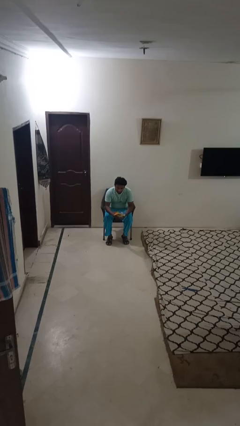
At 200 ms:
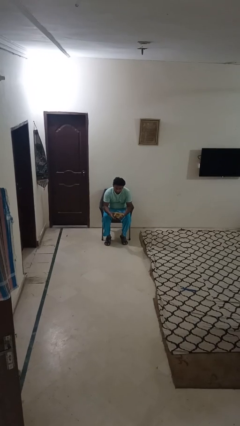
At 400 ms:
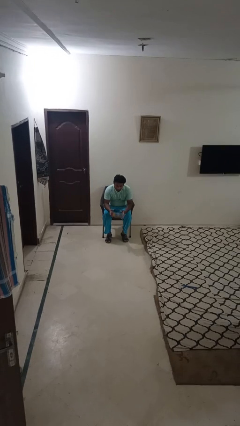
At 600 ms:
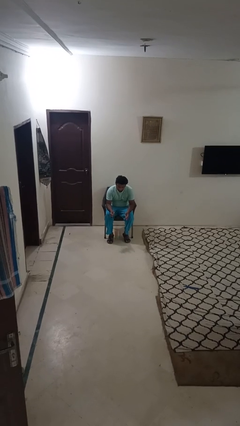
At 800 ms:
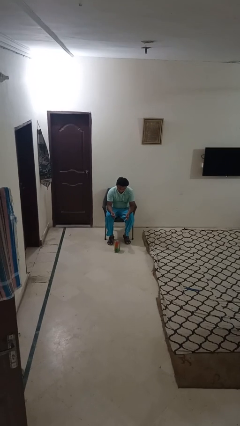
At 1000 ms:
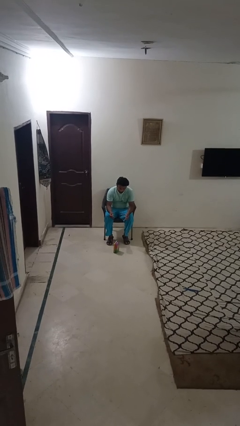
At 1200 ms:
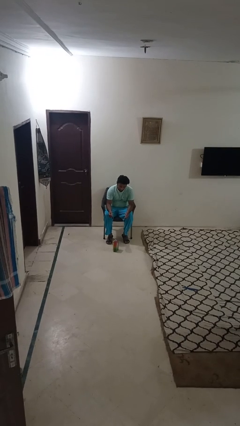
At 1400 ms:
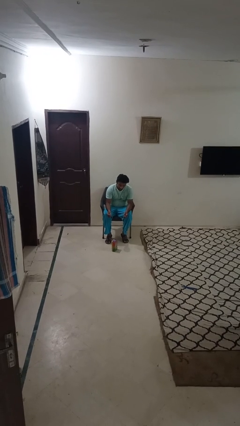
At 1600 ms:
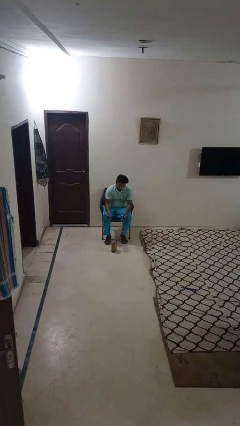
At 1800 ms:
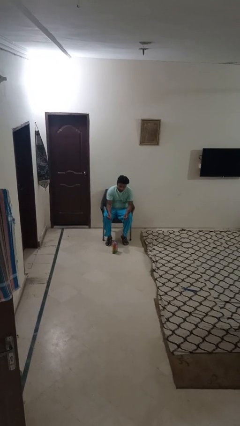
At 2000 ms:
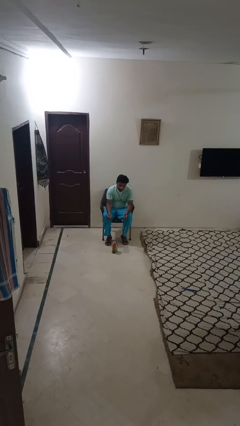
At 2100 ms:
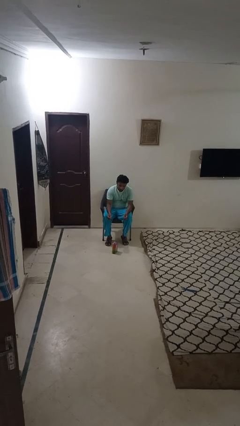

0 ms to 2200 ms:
person drops object

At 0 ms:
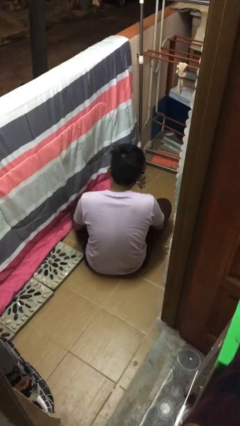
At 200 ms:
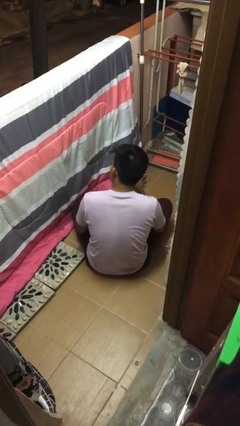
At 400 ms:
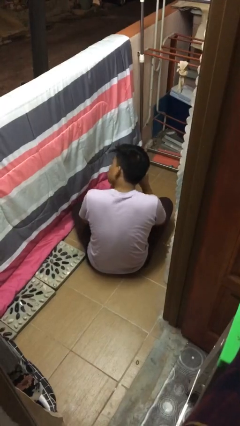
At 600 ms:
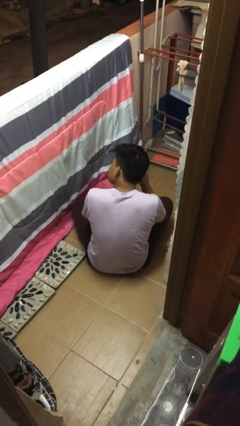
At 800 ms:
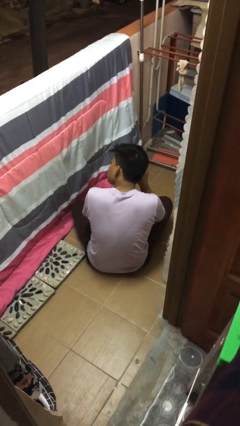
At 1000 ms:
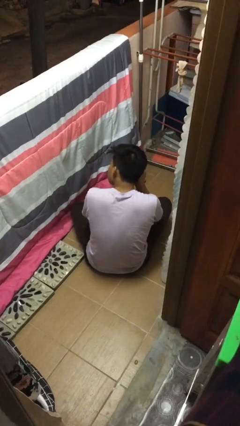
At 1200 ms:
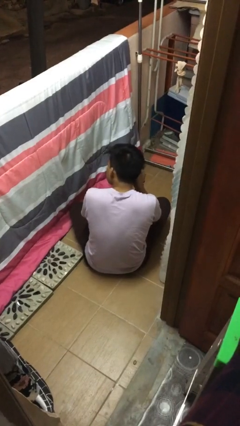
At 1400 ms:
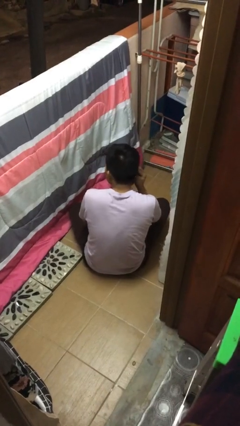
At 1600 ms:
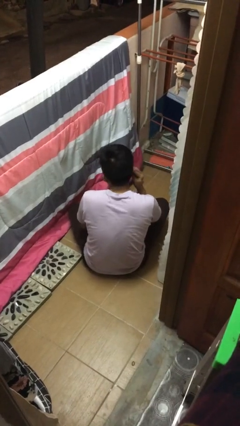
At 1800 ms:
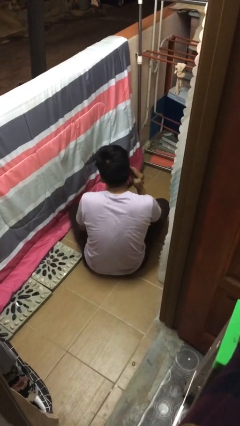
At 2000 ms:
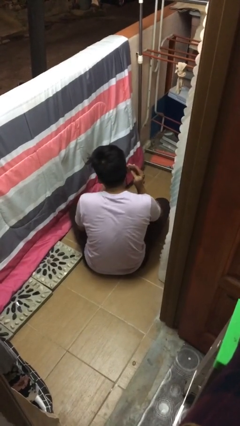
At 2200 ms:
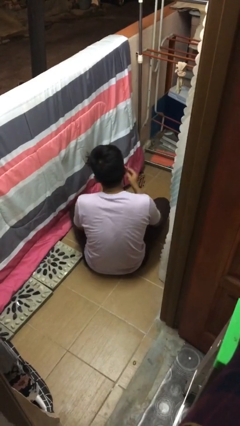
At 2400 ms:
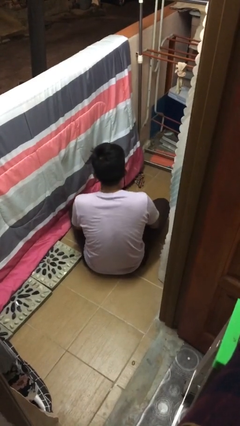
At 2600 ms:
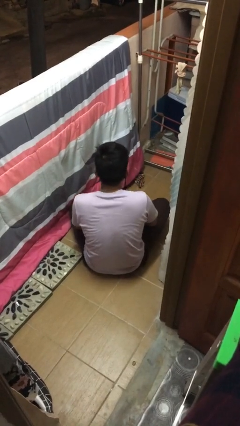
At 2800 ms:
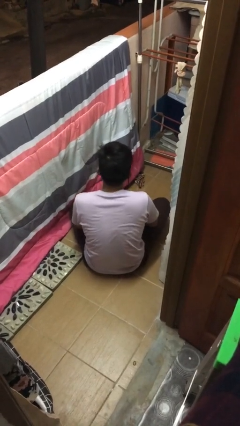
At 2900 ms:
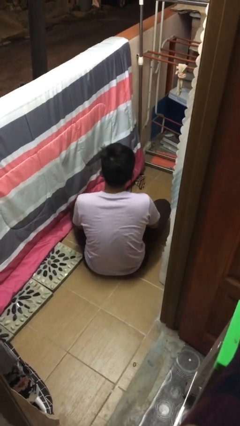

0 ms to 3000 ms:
person puts on earrings

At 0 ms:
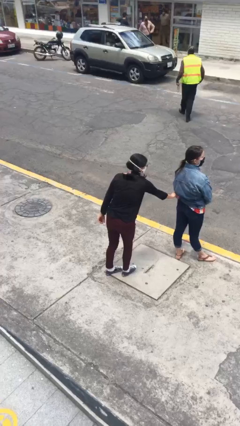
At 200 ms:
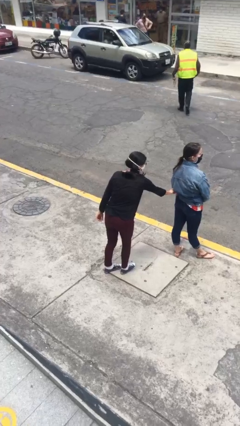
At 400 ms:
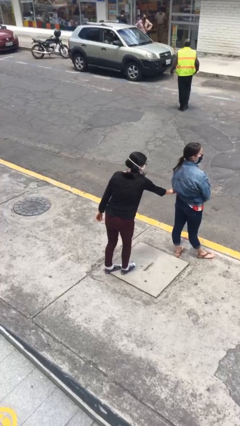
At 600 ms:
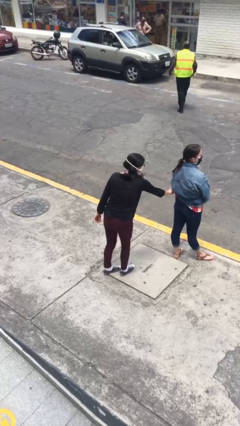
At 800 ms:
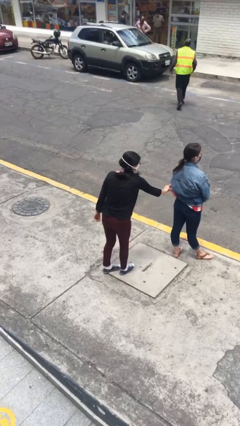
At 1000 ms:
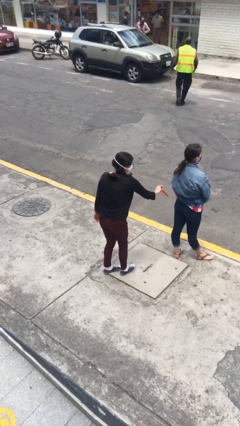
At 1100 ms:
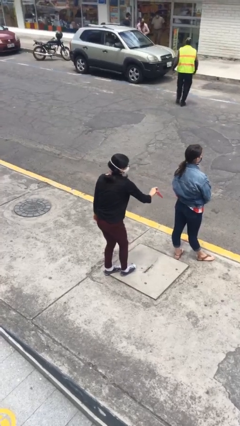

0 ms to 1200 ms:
person steals object from person

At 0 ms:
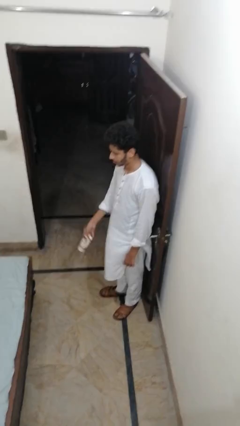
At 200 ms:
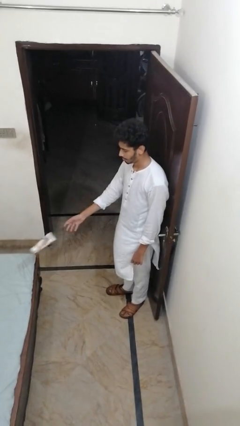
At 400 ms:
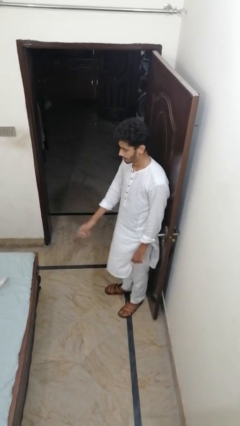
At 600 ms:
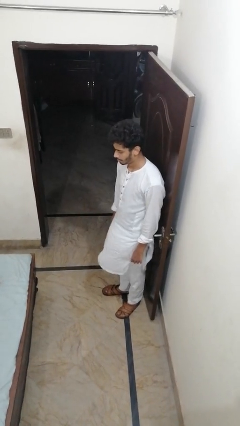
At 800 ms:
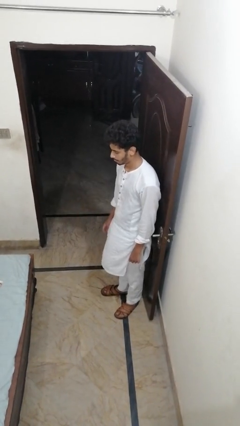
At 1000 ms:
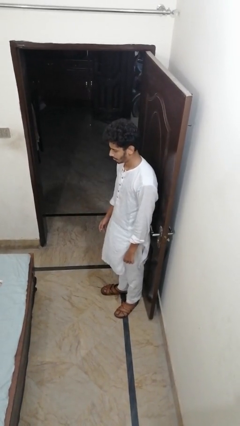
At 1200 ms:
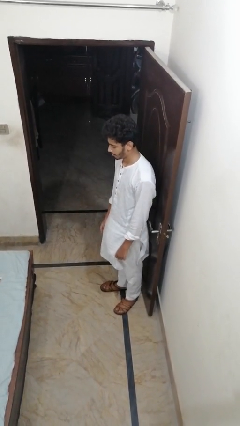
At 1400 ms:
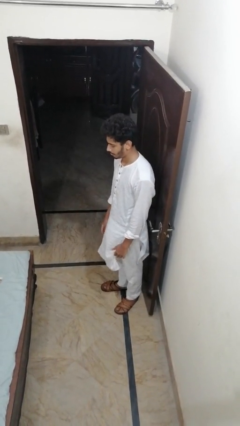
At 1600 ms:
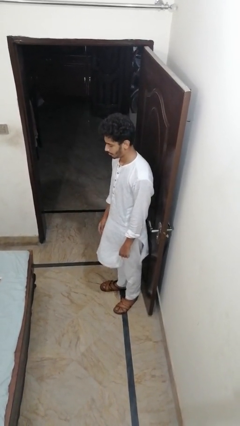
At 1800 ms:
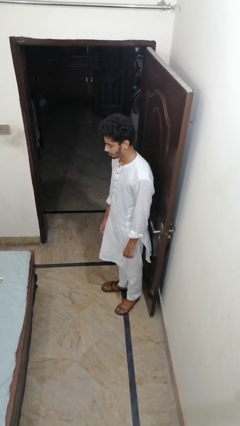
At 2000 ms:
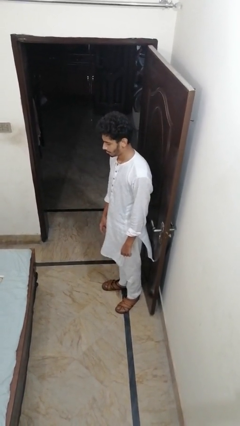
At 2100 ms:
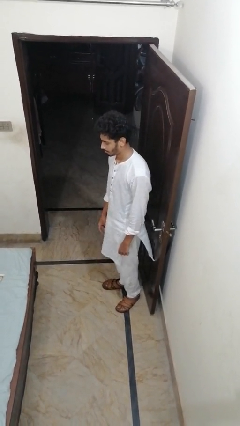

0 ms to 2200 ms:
person throws object on bed

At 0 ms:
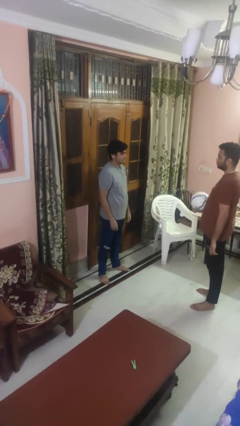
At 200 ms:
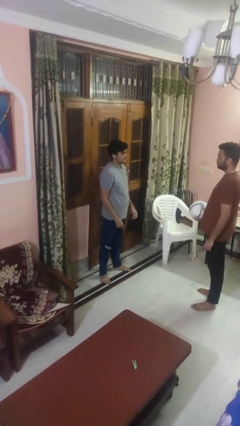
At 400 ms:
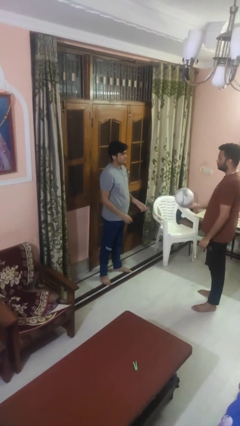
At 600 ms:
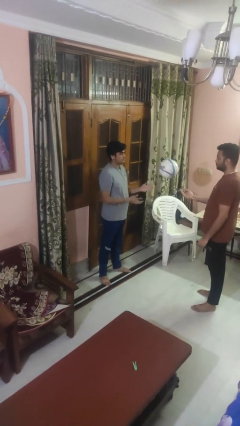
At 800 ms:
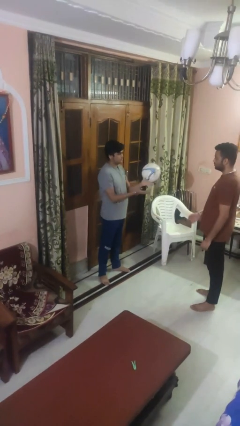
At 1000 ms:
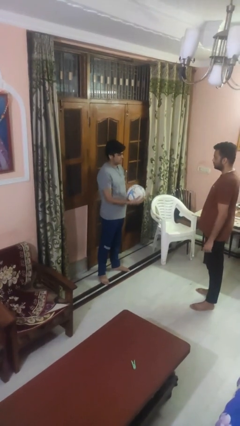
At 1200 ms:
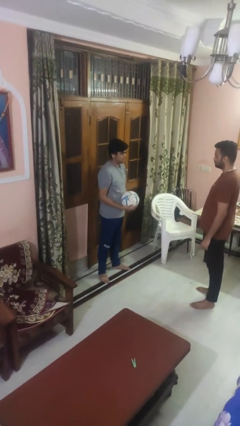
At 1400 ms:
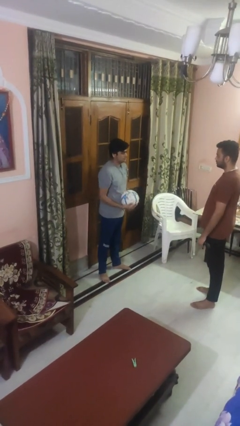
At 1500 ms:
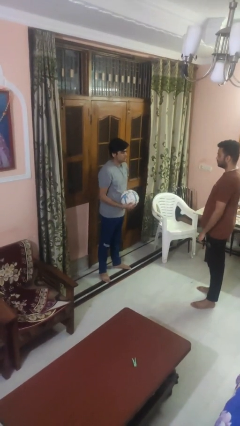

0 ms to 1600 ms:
person catches object from person

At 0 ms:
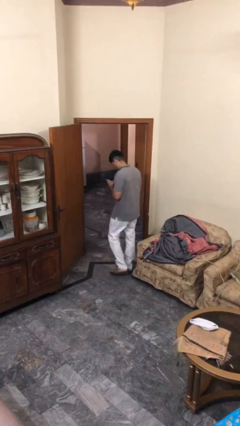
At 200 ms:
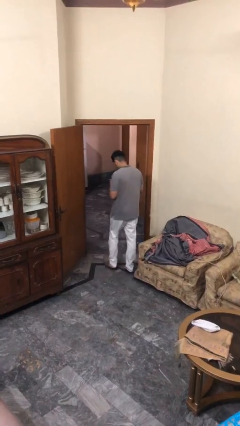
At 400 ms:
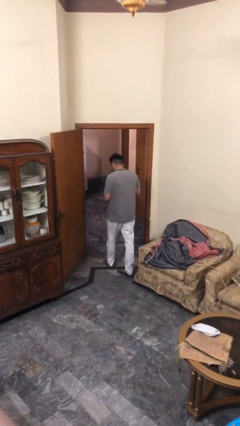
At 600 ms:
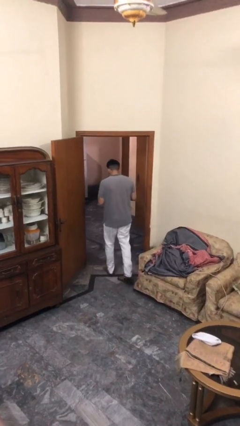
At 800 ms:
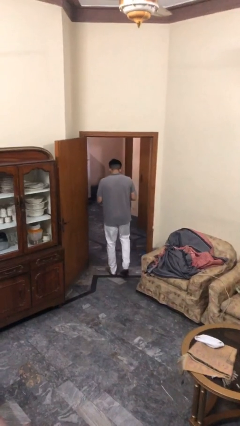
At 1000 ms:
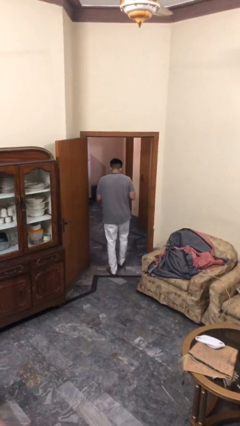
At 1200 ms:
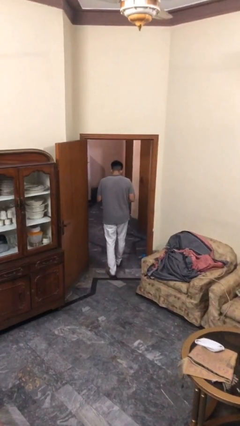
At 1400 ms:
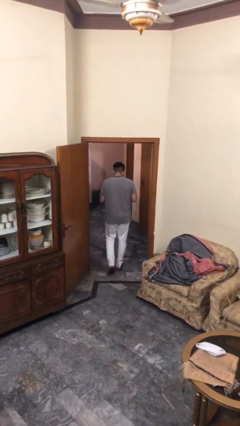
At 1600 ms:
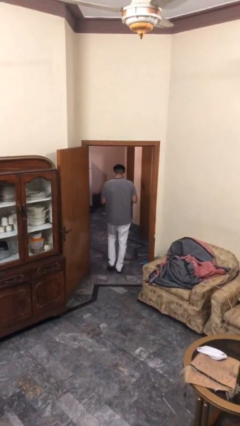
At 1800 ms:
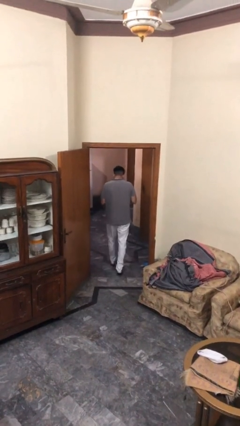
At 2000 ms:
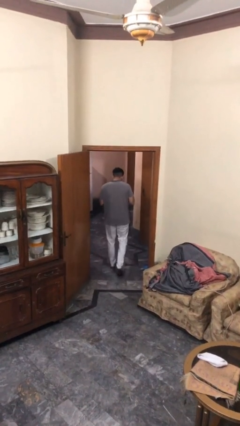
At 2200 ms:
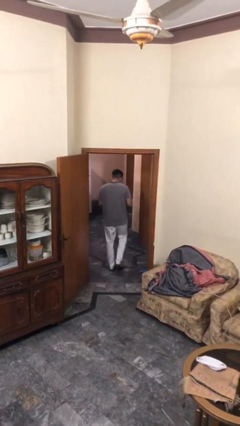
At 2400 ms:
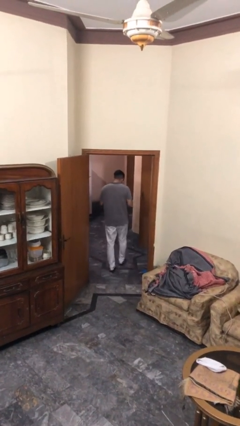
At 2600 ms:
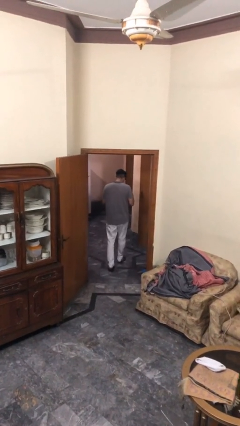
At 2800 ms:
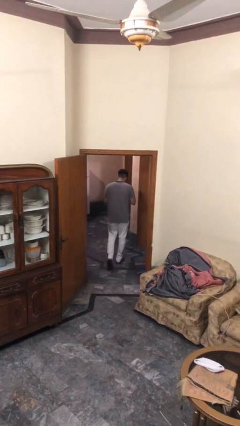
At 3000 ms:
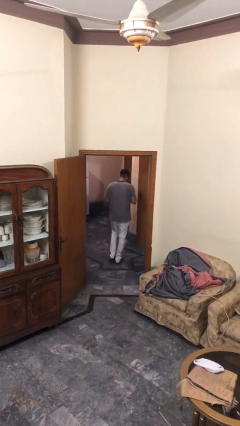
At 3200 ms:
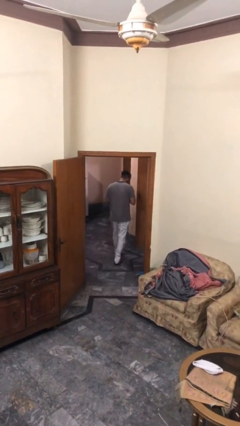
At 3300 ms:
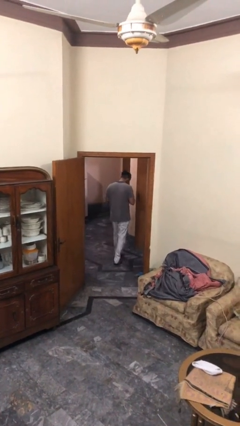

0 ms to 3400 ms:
person exits scene through structure

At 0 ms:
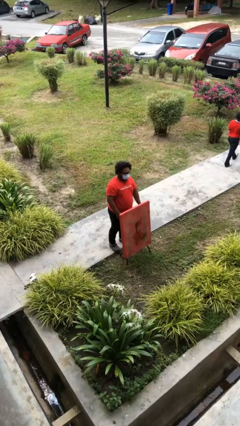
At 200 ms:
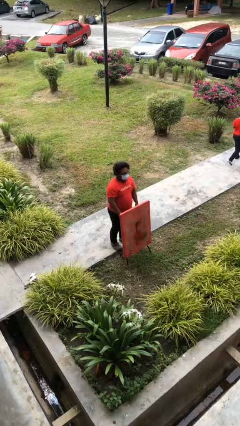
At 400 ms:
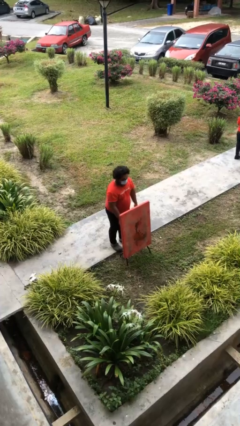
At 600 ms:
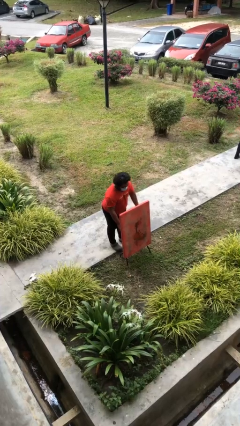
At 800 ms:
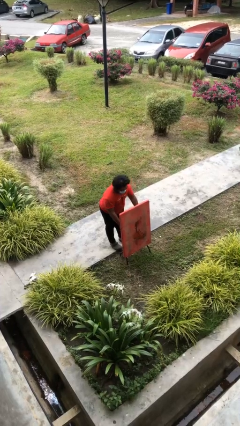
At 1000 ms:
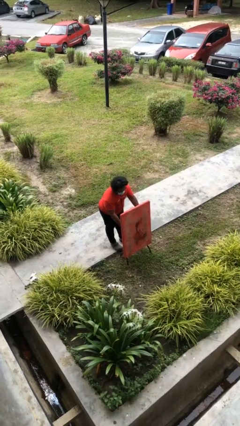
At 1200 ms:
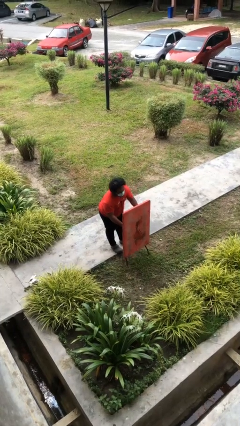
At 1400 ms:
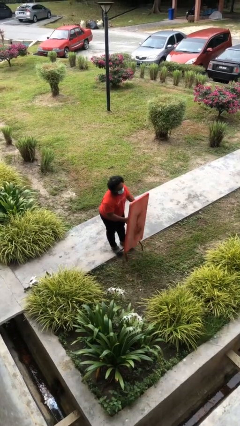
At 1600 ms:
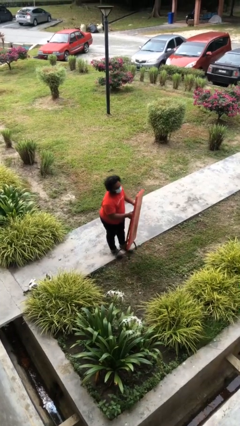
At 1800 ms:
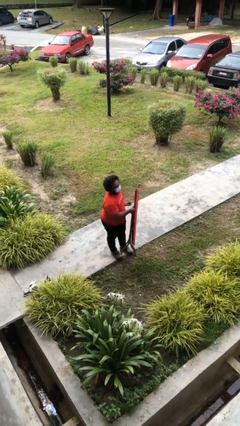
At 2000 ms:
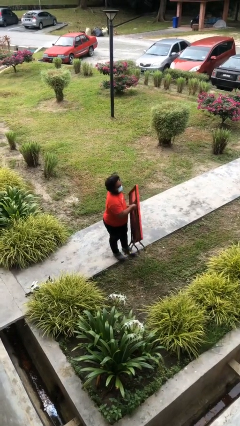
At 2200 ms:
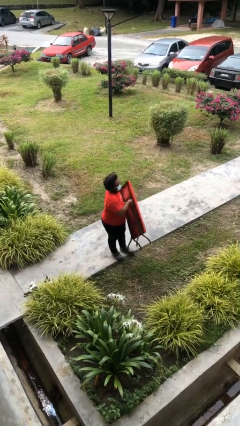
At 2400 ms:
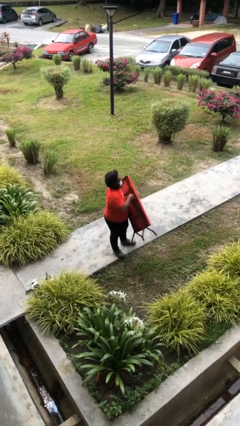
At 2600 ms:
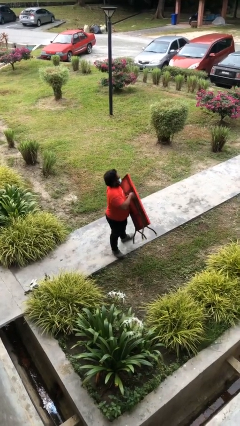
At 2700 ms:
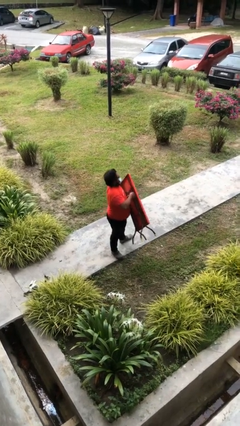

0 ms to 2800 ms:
person picks up object from floor

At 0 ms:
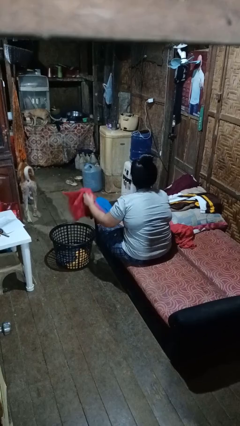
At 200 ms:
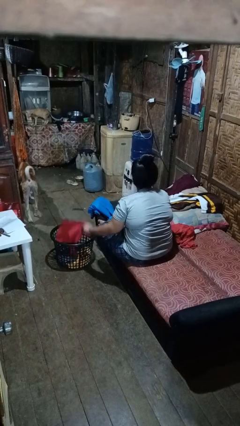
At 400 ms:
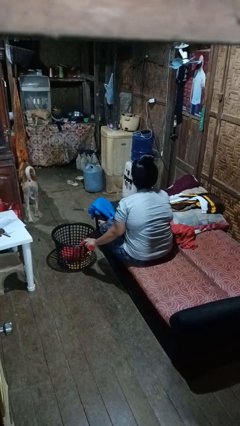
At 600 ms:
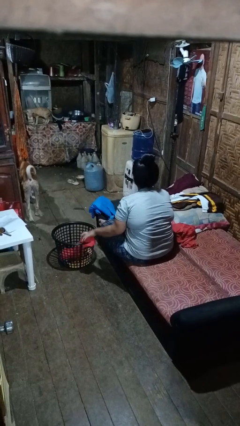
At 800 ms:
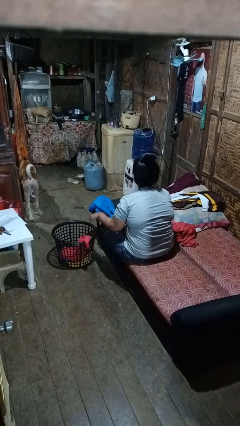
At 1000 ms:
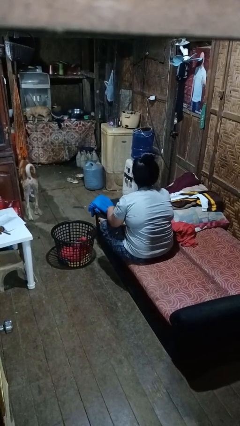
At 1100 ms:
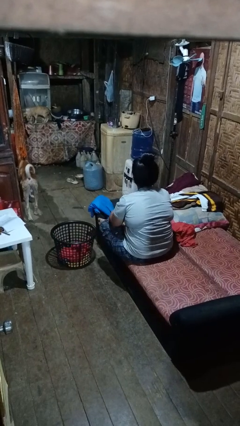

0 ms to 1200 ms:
person puts object into basket
